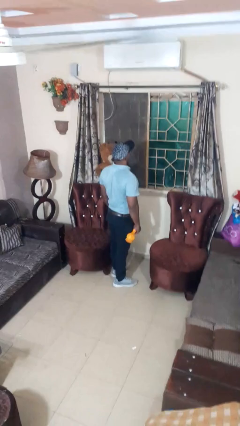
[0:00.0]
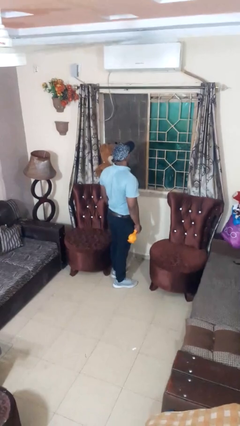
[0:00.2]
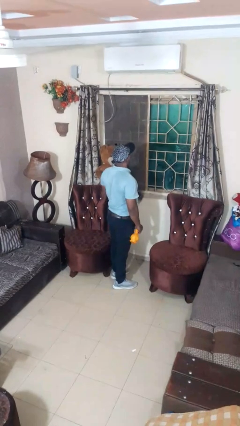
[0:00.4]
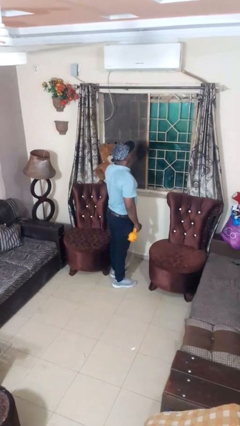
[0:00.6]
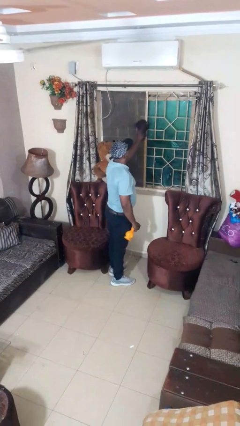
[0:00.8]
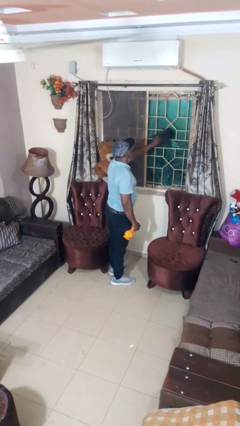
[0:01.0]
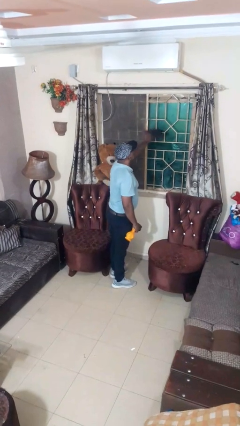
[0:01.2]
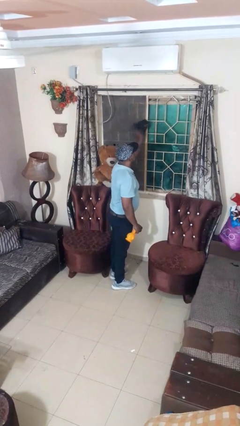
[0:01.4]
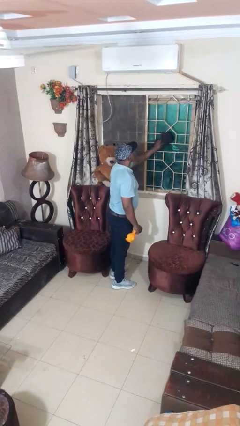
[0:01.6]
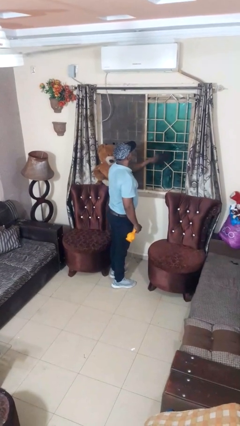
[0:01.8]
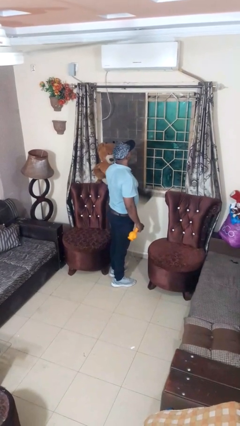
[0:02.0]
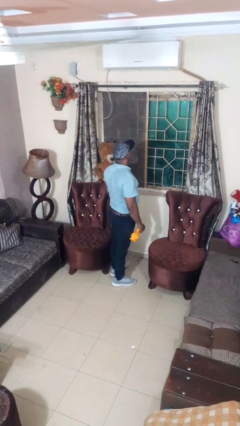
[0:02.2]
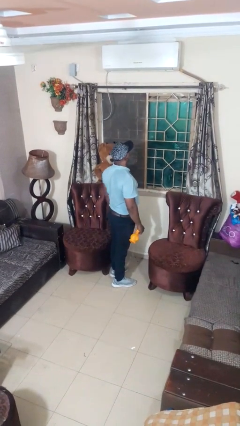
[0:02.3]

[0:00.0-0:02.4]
person washes window

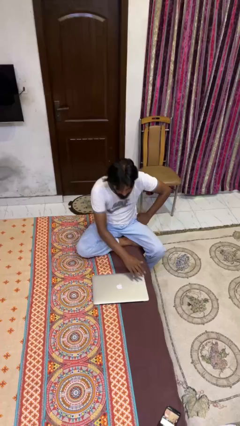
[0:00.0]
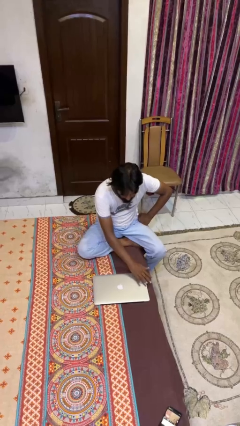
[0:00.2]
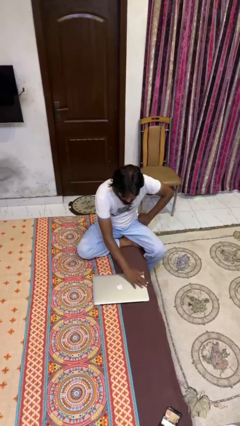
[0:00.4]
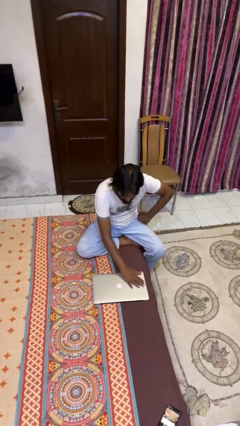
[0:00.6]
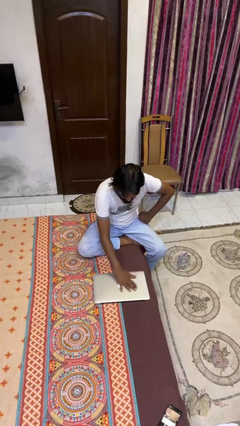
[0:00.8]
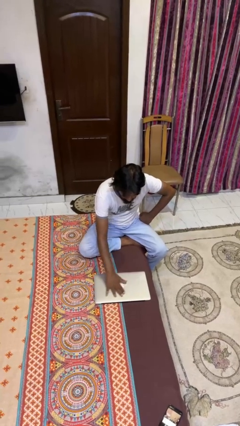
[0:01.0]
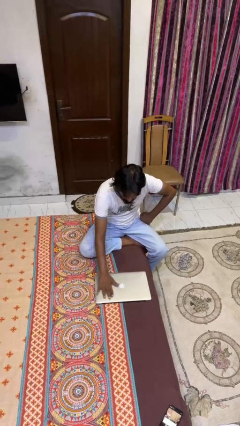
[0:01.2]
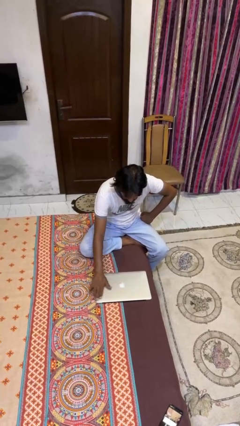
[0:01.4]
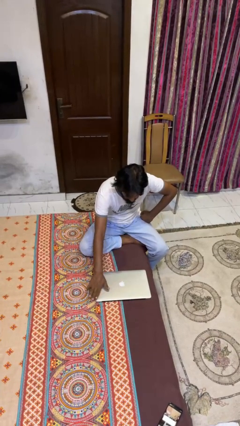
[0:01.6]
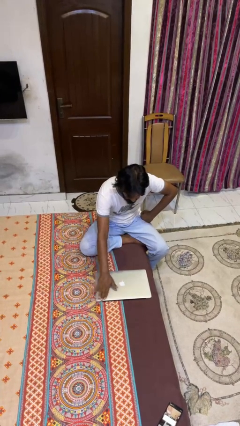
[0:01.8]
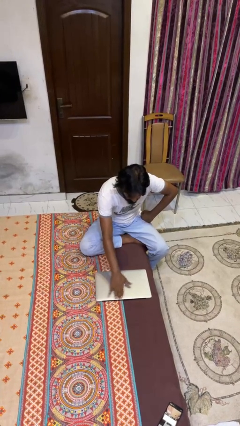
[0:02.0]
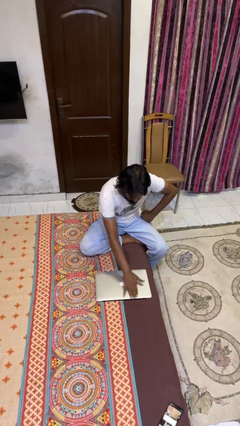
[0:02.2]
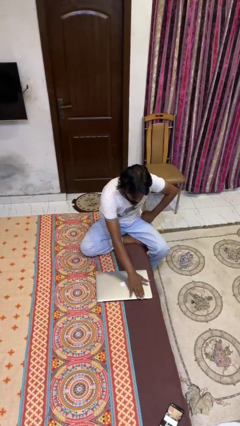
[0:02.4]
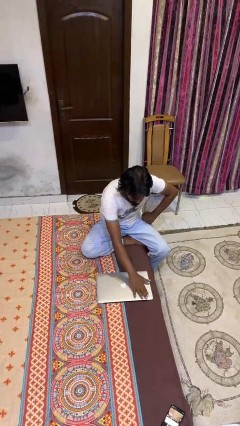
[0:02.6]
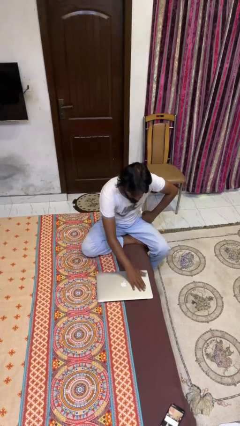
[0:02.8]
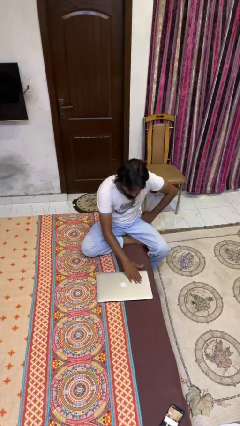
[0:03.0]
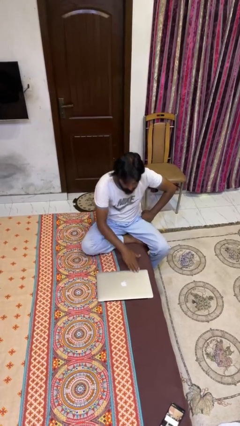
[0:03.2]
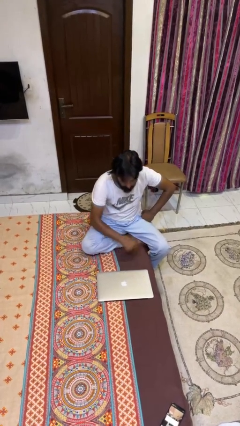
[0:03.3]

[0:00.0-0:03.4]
person waves hand over object

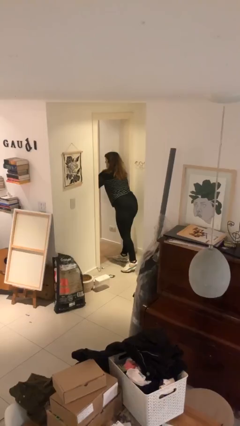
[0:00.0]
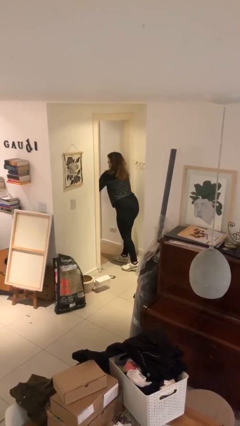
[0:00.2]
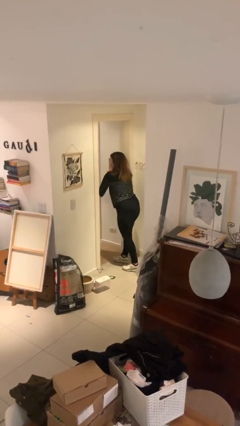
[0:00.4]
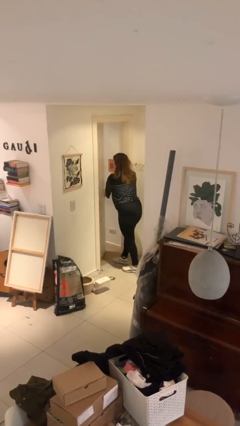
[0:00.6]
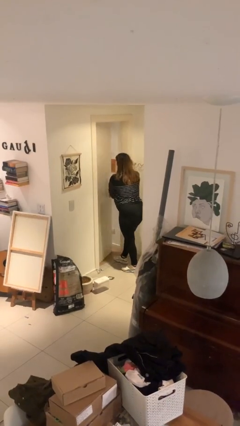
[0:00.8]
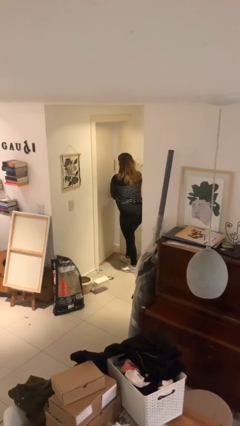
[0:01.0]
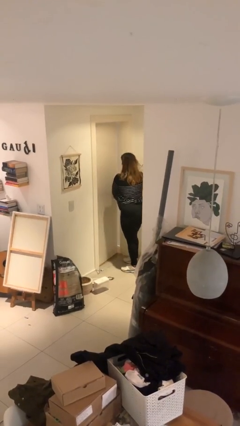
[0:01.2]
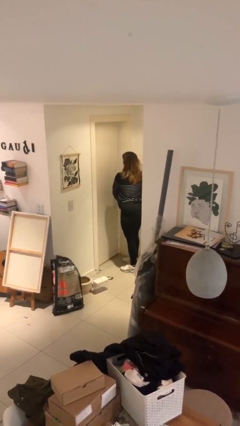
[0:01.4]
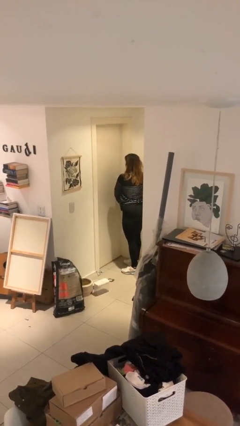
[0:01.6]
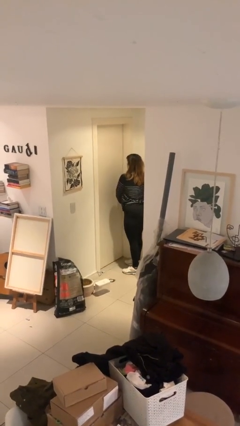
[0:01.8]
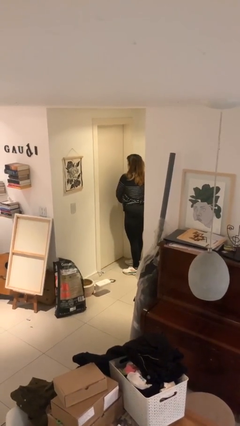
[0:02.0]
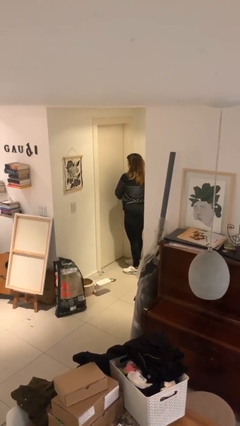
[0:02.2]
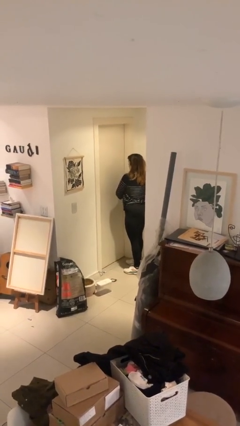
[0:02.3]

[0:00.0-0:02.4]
person closes facility door

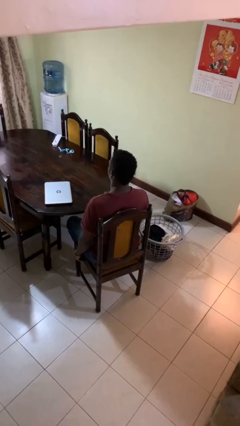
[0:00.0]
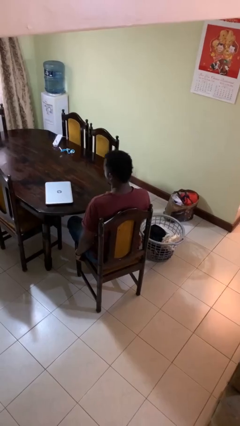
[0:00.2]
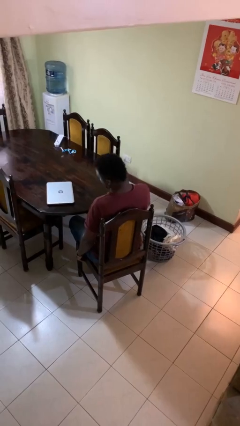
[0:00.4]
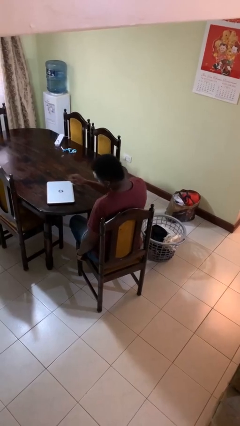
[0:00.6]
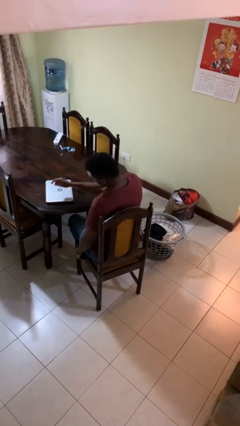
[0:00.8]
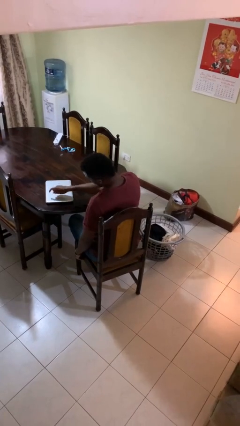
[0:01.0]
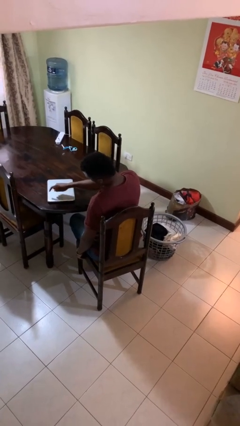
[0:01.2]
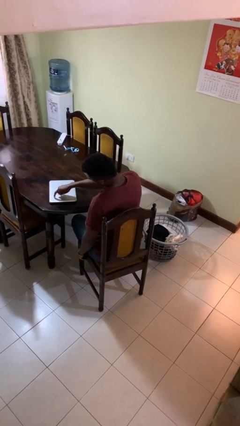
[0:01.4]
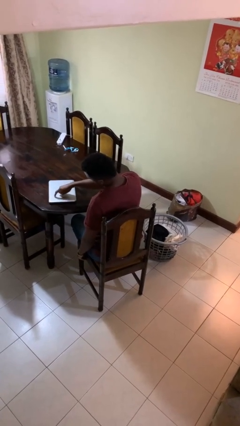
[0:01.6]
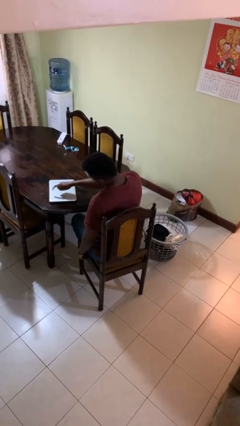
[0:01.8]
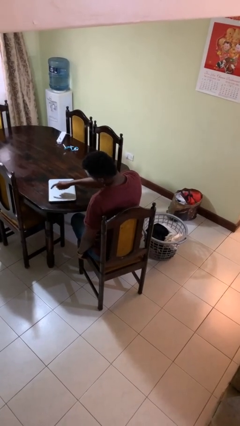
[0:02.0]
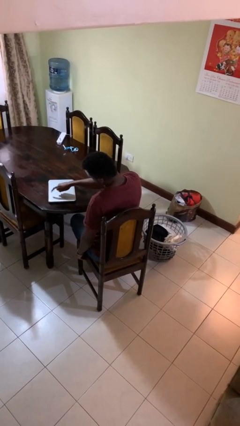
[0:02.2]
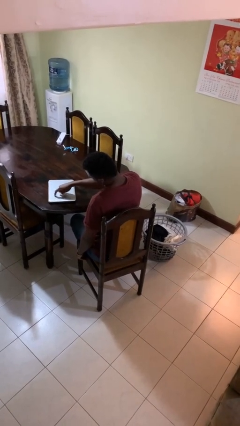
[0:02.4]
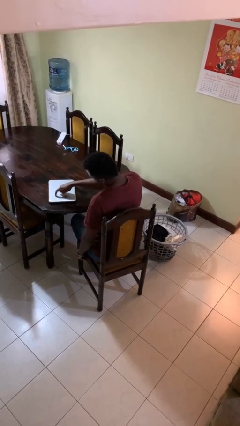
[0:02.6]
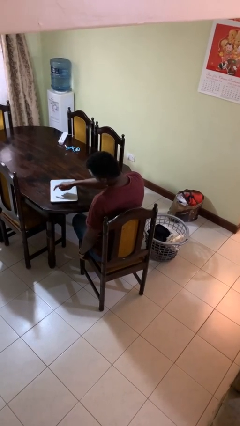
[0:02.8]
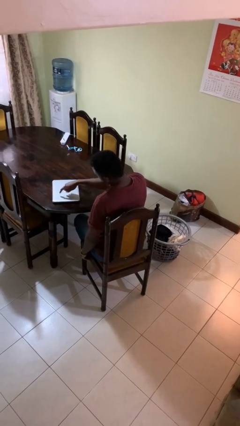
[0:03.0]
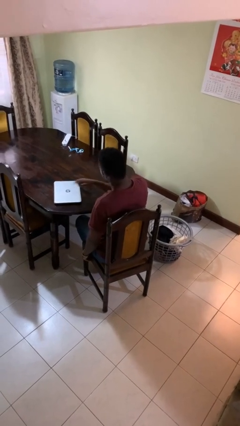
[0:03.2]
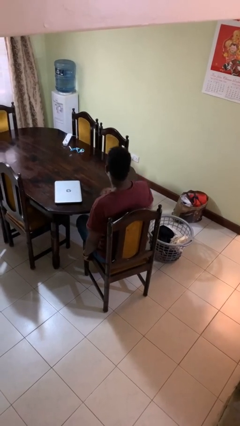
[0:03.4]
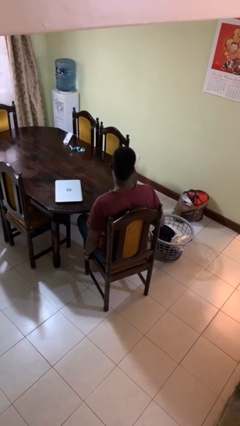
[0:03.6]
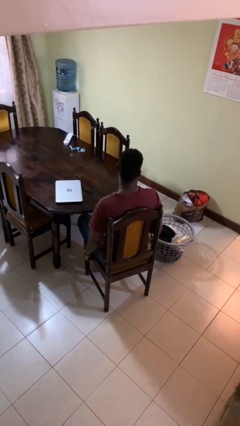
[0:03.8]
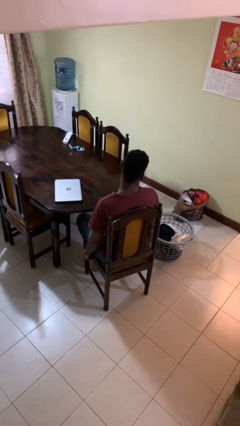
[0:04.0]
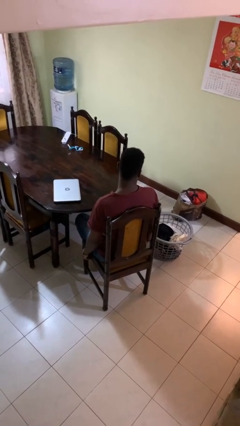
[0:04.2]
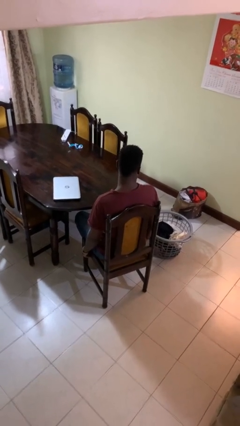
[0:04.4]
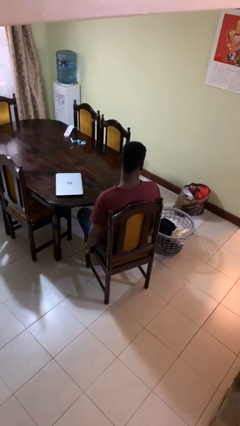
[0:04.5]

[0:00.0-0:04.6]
person taps object with finger

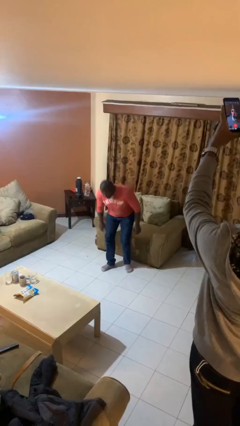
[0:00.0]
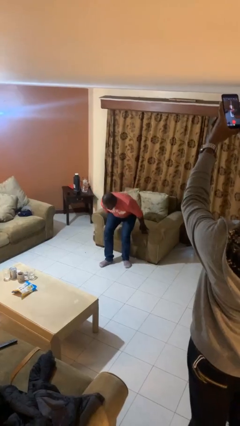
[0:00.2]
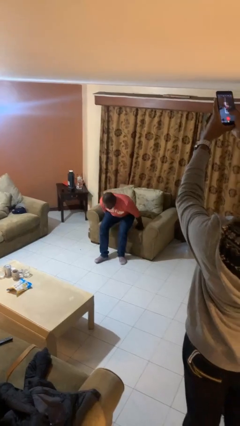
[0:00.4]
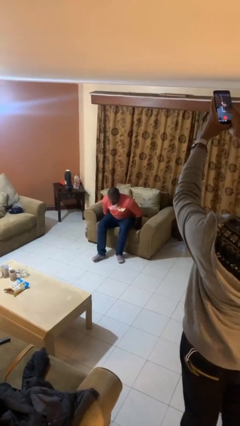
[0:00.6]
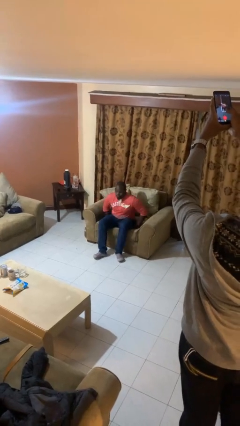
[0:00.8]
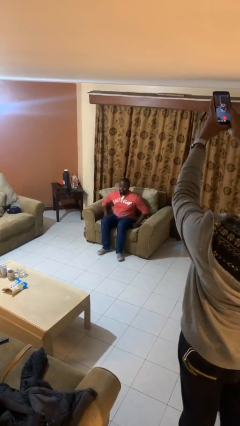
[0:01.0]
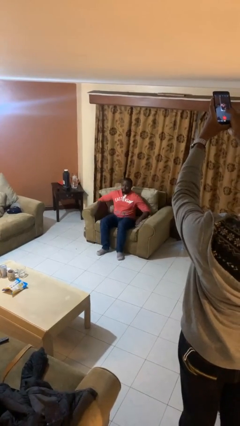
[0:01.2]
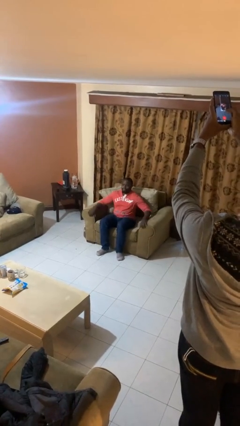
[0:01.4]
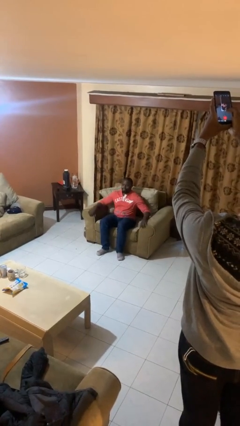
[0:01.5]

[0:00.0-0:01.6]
person sits down

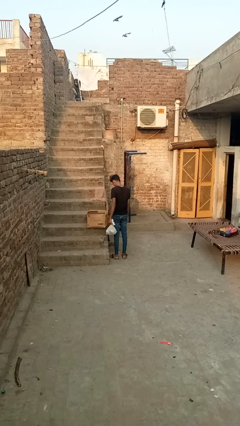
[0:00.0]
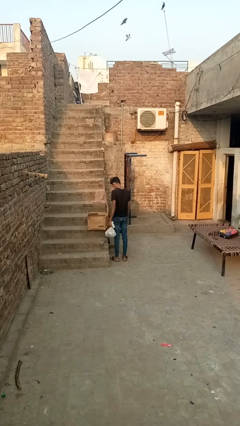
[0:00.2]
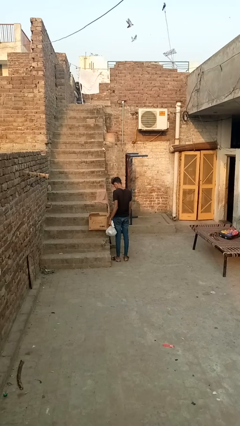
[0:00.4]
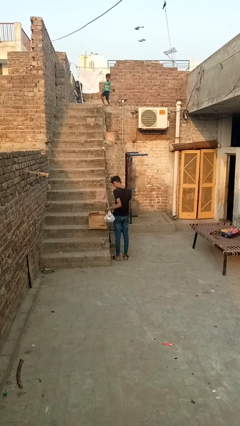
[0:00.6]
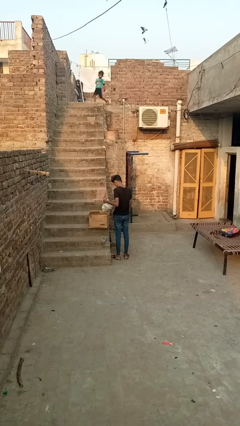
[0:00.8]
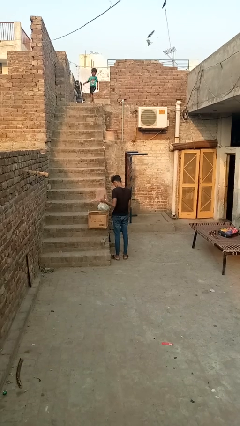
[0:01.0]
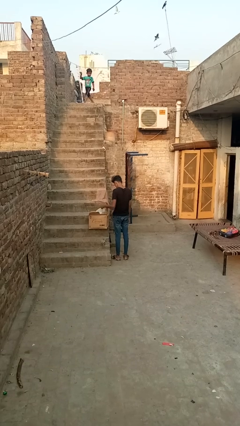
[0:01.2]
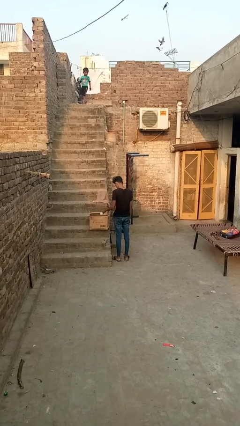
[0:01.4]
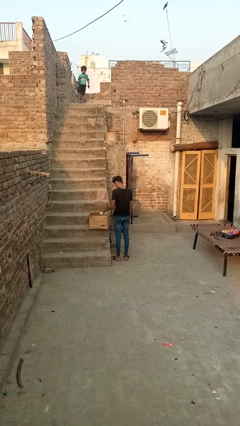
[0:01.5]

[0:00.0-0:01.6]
person puts object into box

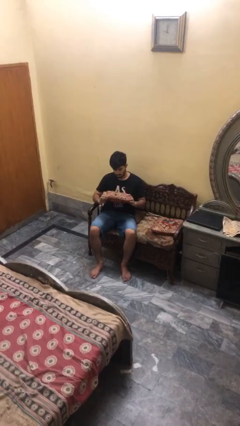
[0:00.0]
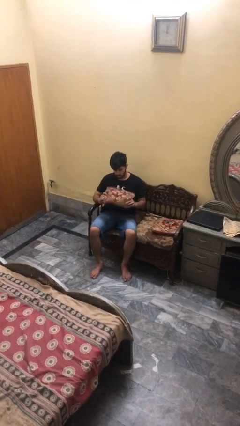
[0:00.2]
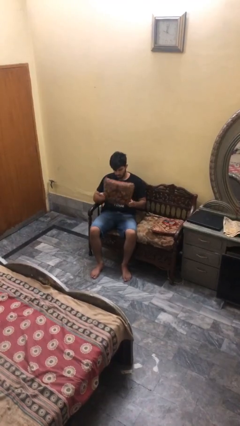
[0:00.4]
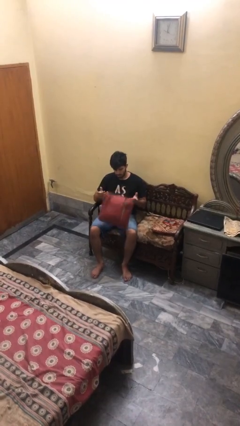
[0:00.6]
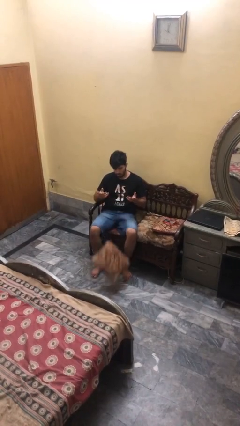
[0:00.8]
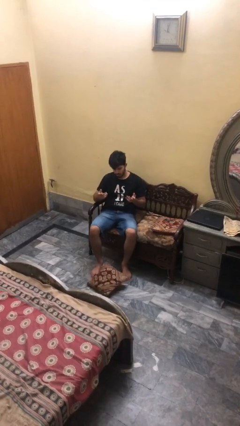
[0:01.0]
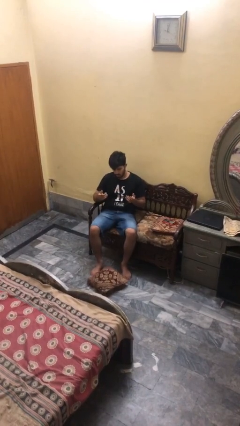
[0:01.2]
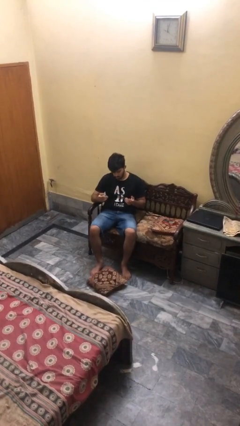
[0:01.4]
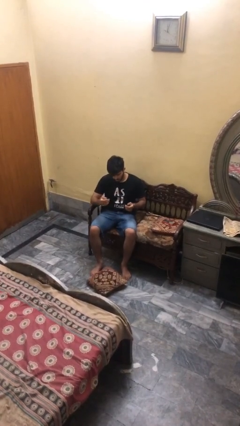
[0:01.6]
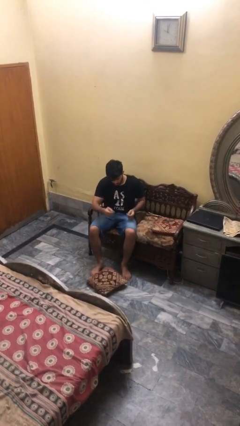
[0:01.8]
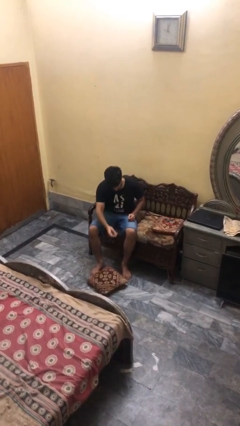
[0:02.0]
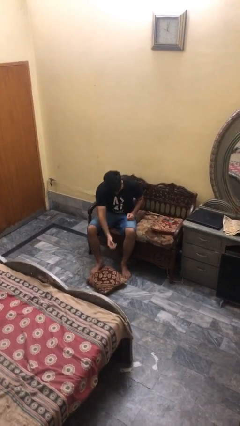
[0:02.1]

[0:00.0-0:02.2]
person drops object
